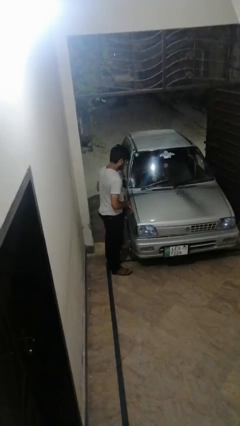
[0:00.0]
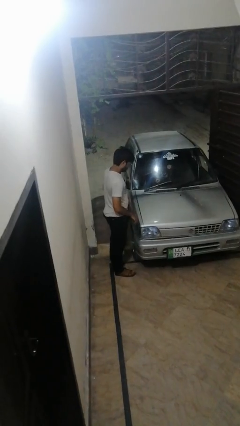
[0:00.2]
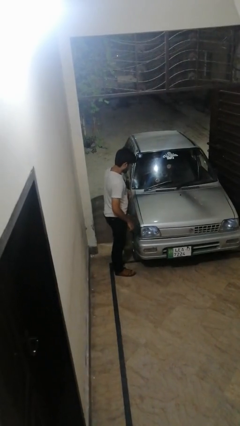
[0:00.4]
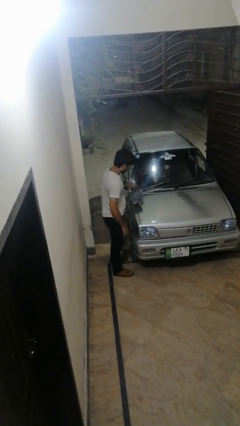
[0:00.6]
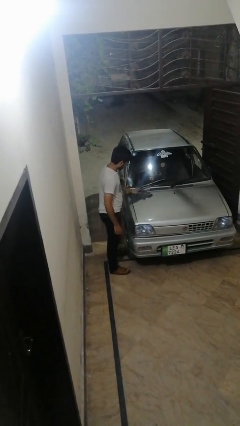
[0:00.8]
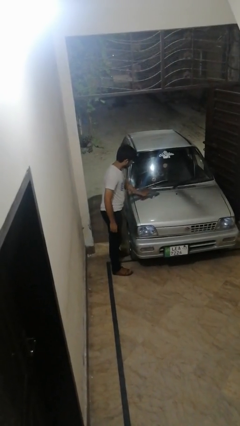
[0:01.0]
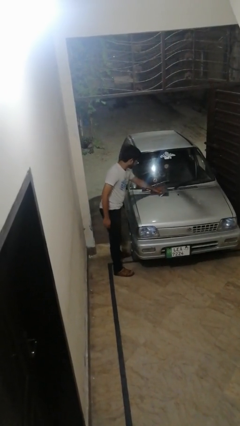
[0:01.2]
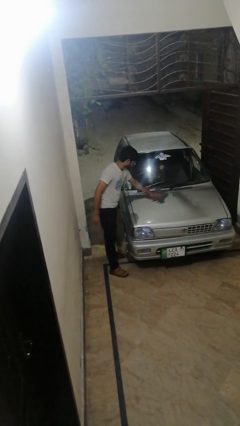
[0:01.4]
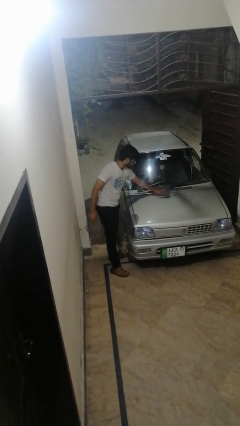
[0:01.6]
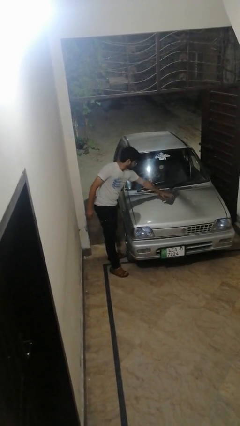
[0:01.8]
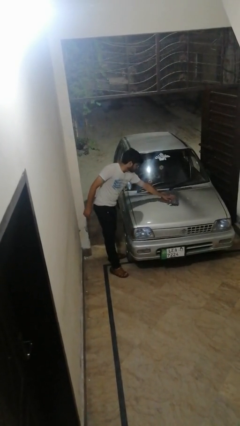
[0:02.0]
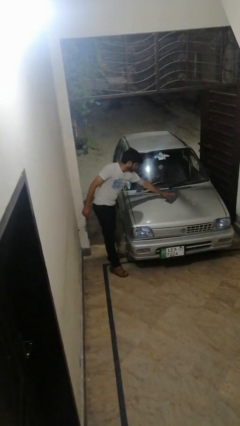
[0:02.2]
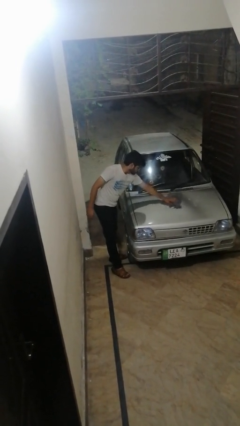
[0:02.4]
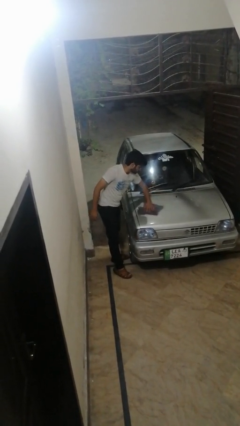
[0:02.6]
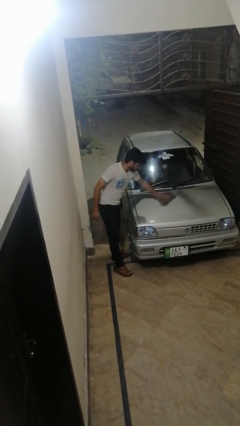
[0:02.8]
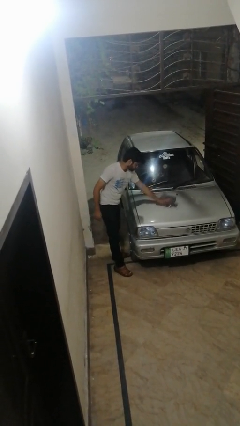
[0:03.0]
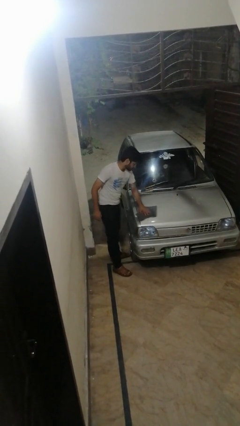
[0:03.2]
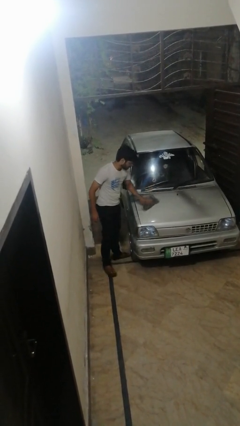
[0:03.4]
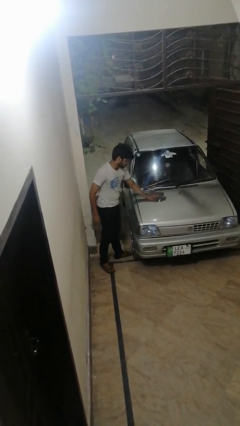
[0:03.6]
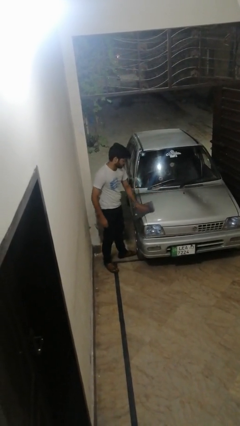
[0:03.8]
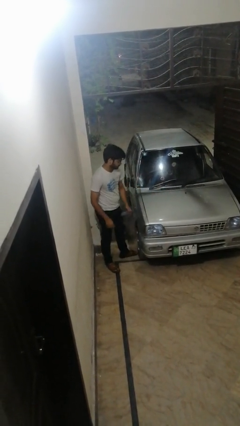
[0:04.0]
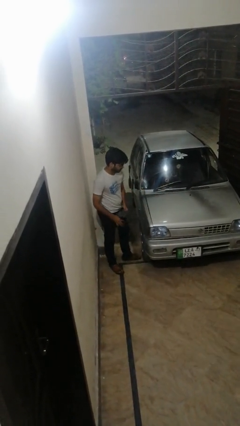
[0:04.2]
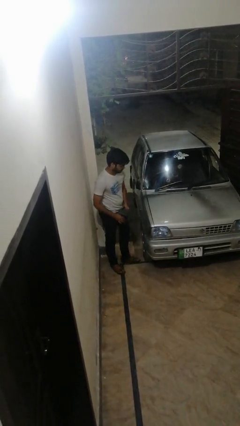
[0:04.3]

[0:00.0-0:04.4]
person polishes car with rag

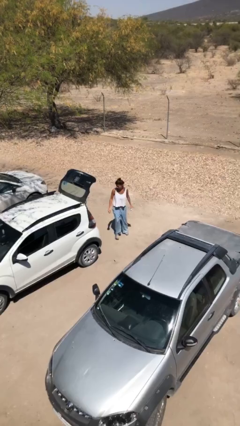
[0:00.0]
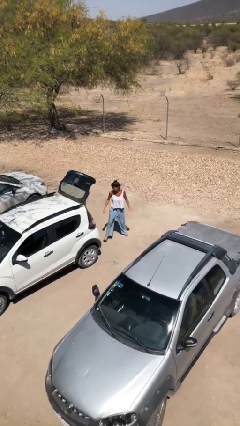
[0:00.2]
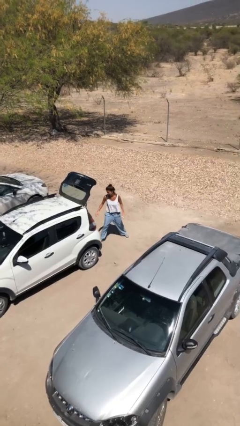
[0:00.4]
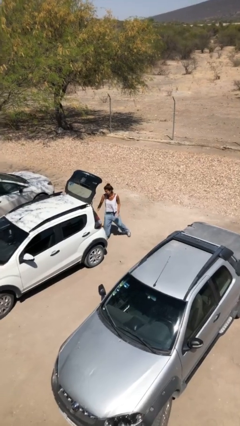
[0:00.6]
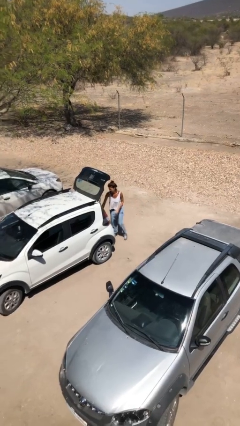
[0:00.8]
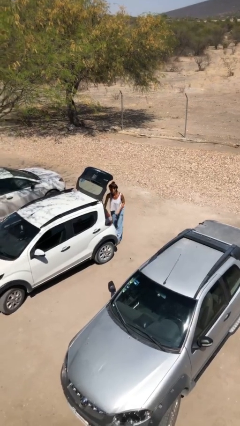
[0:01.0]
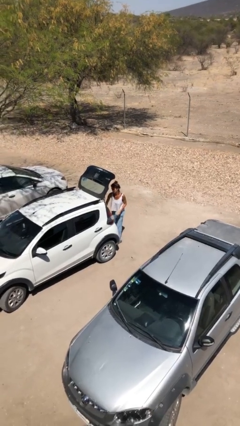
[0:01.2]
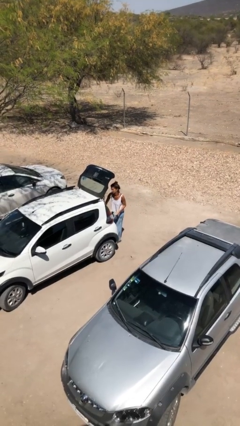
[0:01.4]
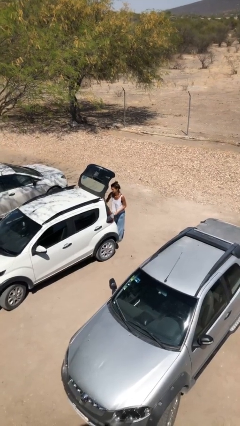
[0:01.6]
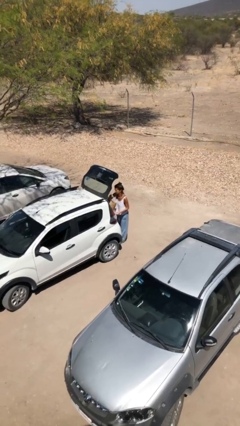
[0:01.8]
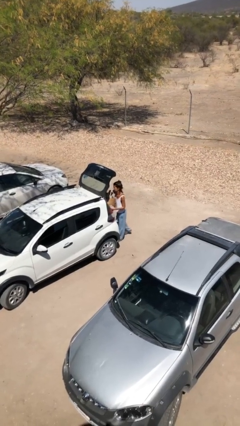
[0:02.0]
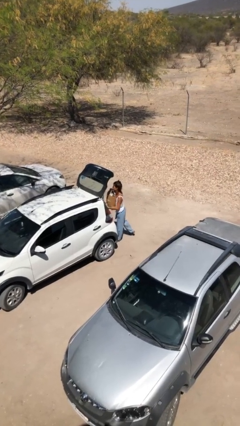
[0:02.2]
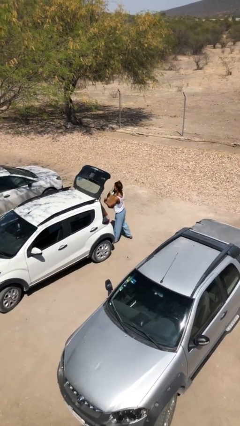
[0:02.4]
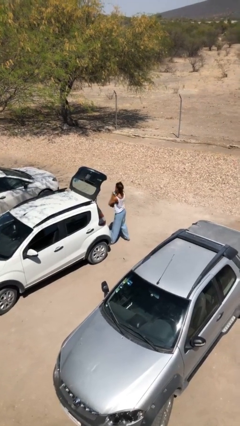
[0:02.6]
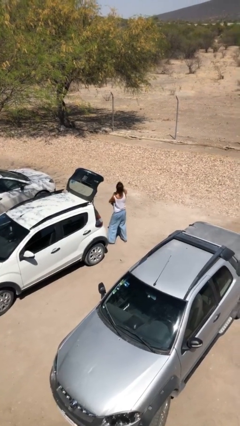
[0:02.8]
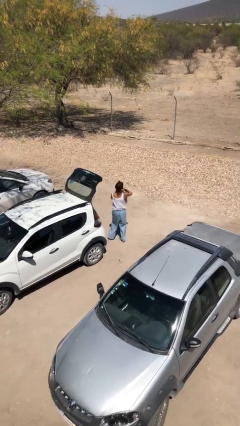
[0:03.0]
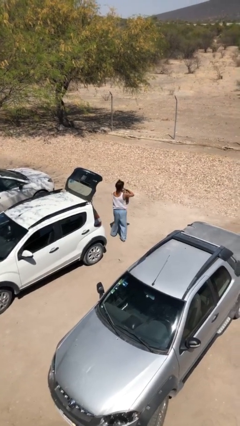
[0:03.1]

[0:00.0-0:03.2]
person unloads car

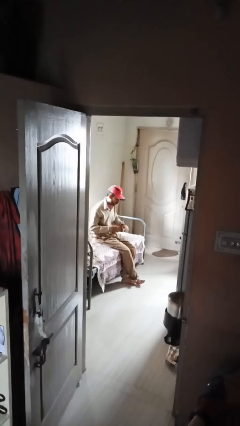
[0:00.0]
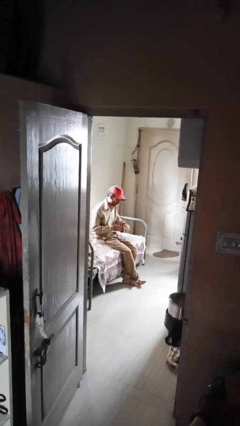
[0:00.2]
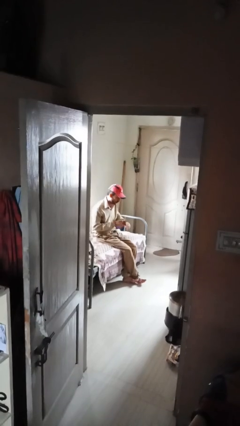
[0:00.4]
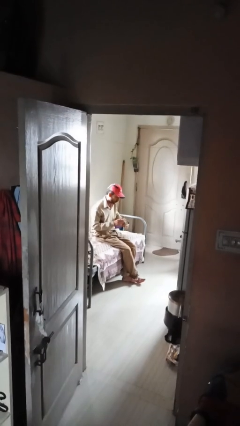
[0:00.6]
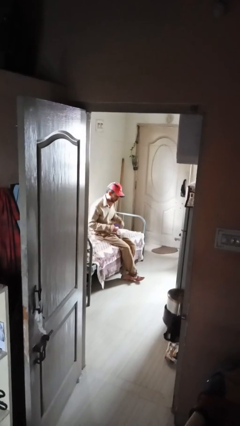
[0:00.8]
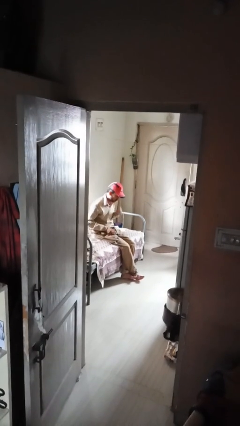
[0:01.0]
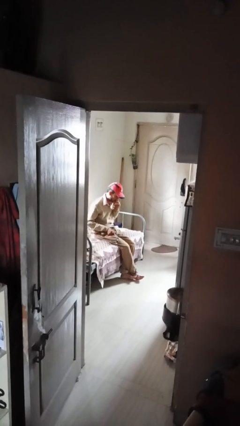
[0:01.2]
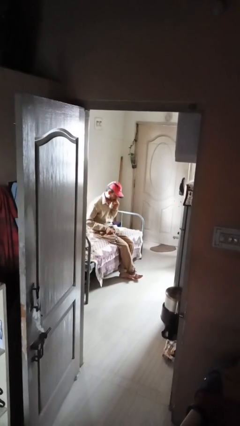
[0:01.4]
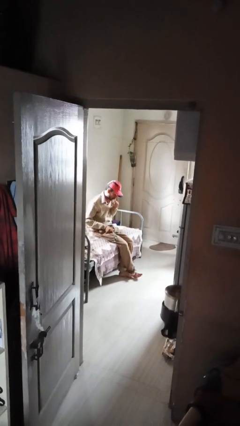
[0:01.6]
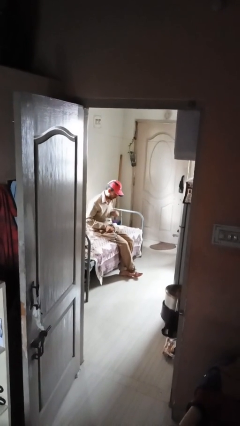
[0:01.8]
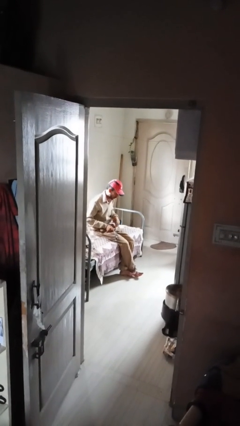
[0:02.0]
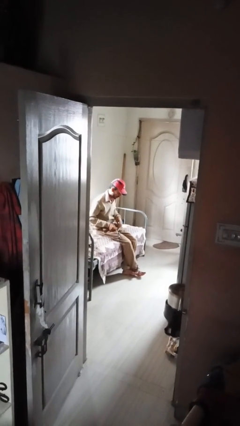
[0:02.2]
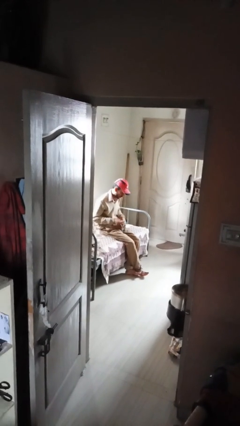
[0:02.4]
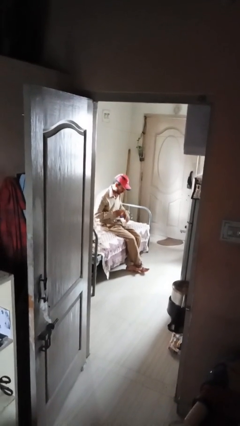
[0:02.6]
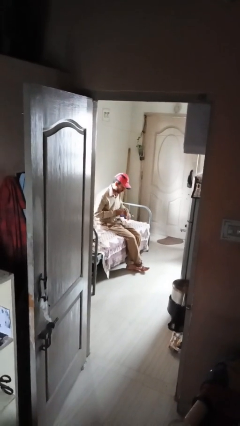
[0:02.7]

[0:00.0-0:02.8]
person takes off wristwatch

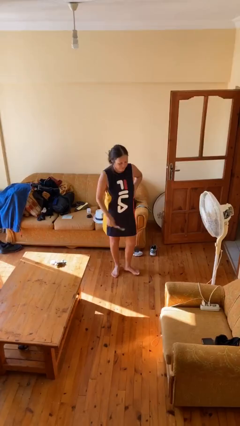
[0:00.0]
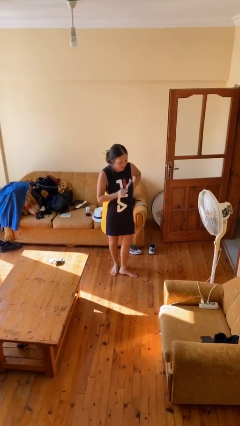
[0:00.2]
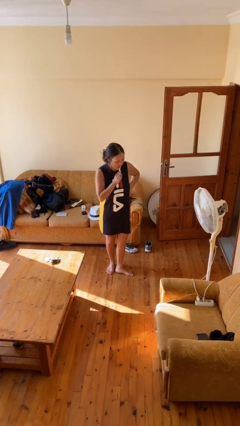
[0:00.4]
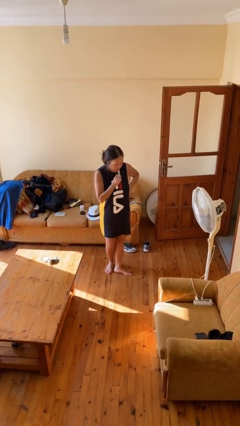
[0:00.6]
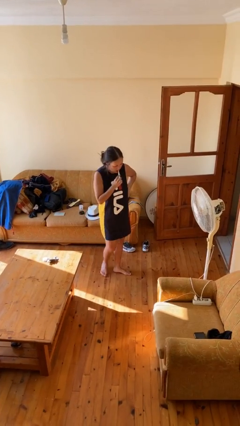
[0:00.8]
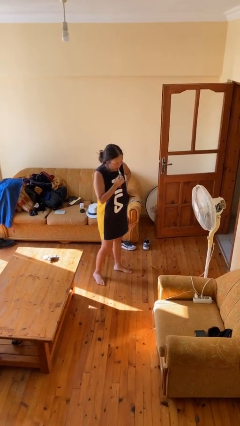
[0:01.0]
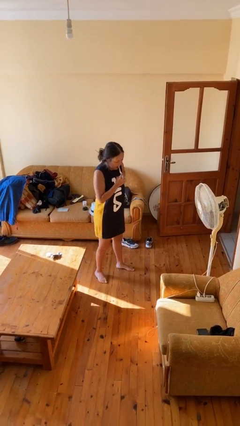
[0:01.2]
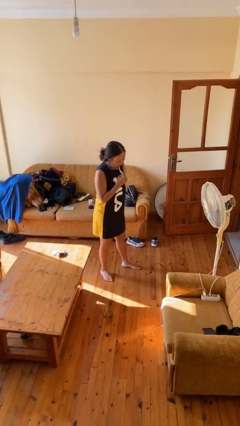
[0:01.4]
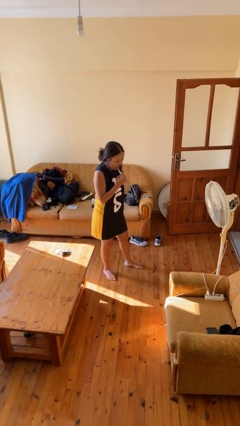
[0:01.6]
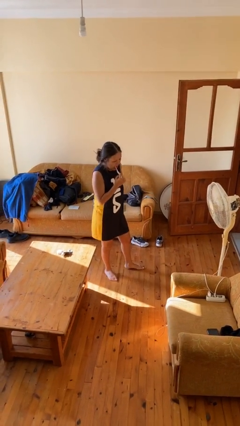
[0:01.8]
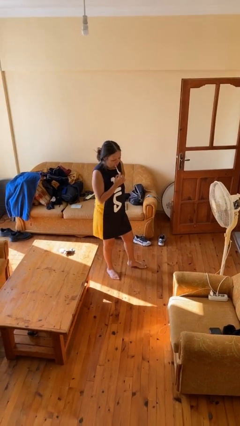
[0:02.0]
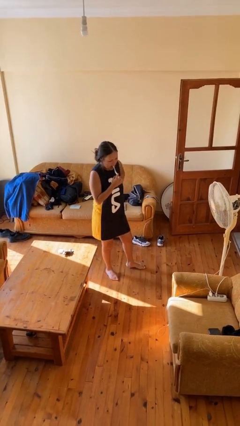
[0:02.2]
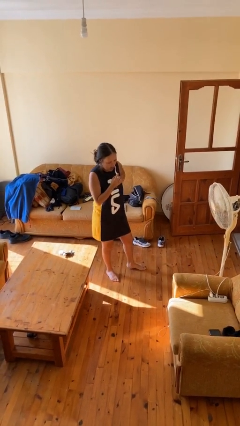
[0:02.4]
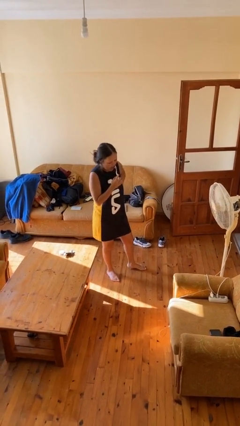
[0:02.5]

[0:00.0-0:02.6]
person brushes teeth

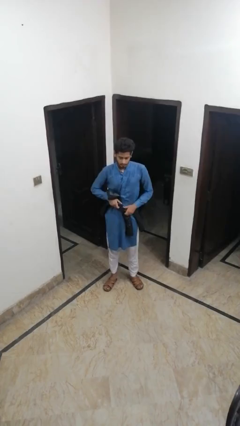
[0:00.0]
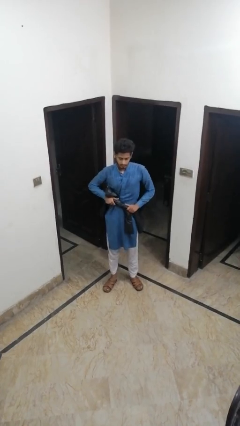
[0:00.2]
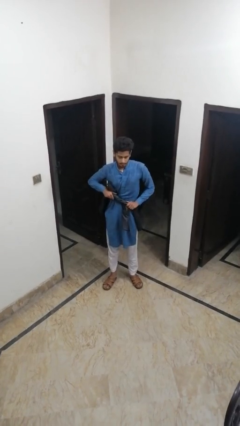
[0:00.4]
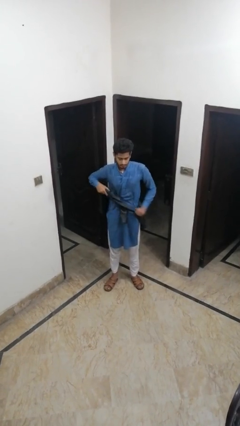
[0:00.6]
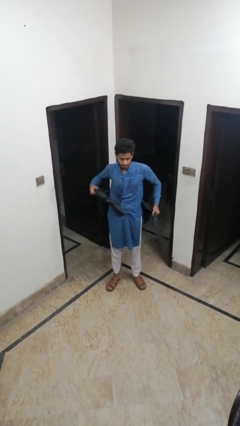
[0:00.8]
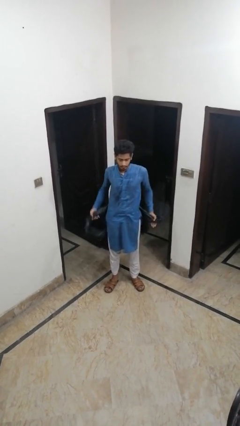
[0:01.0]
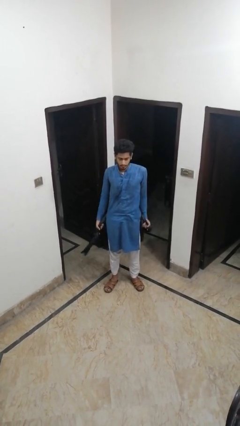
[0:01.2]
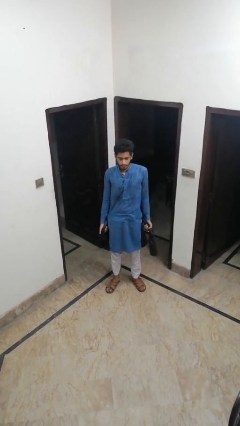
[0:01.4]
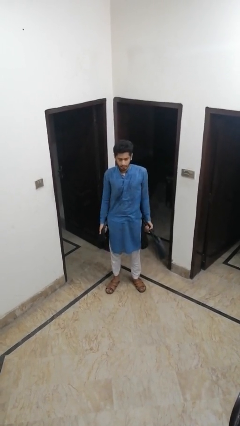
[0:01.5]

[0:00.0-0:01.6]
person unties jacket around waist

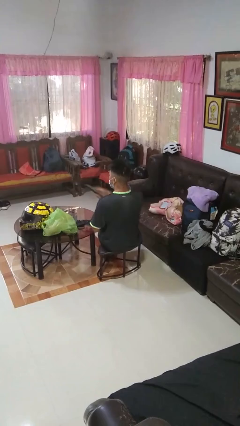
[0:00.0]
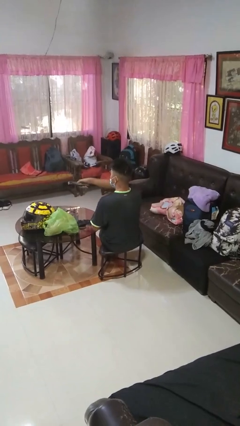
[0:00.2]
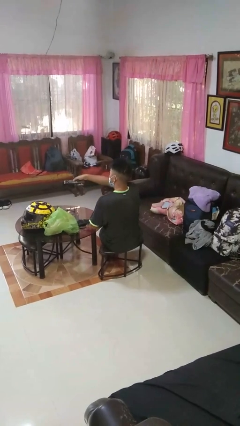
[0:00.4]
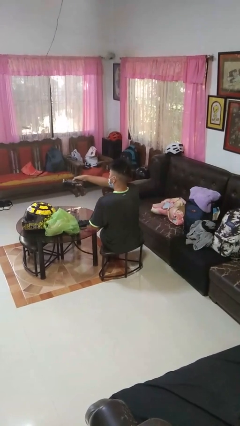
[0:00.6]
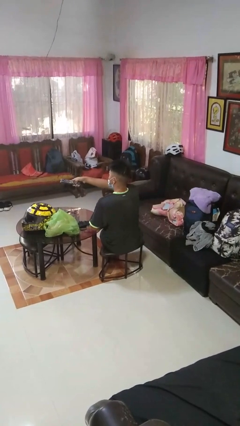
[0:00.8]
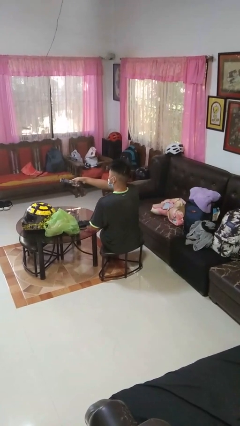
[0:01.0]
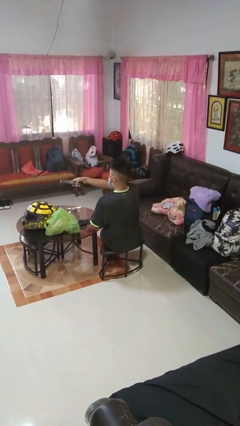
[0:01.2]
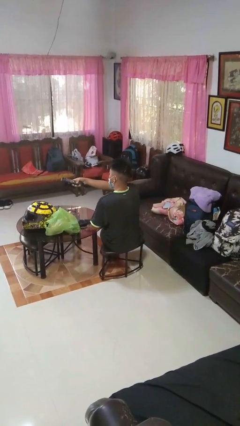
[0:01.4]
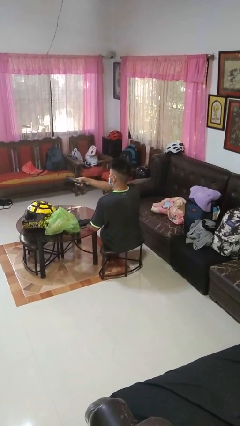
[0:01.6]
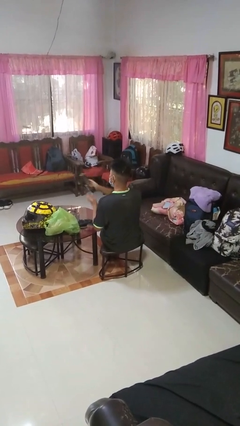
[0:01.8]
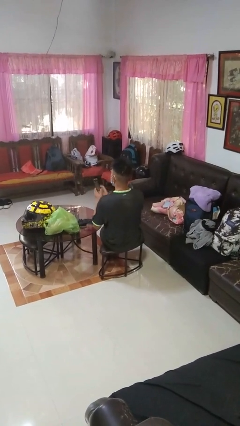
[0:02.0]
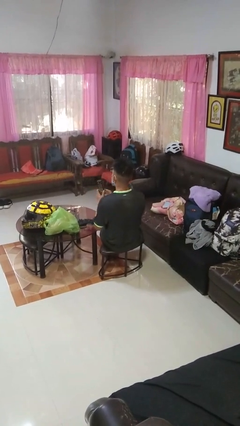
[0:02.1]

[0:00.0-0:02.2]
person uses television remote

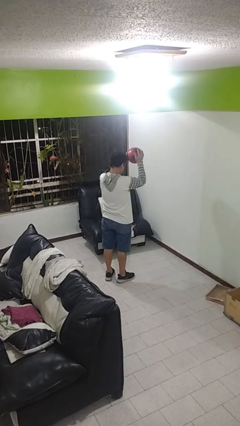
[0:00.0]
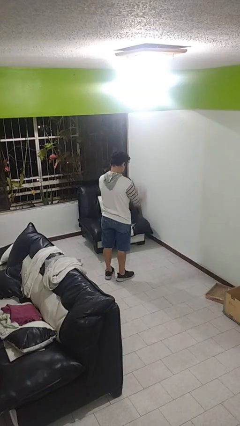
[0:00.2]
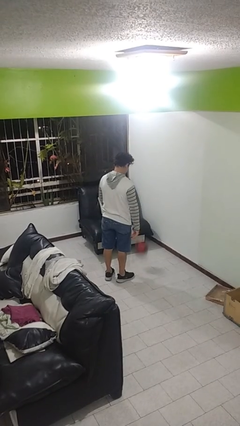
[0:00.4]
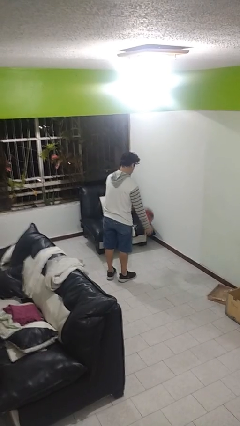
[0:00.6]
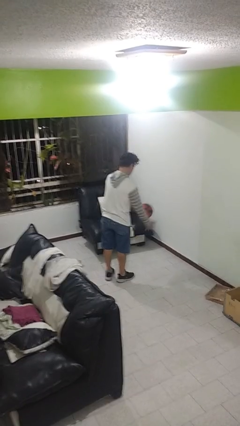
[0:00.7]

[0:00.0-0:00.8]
person bounces ball on floor
